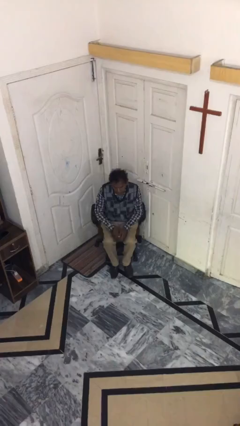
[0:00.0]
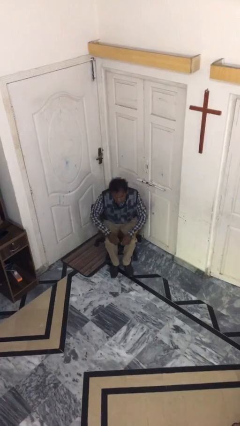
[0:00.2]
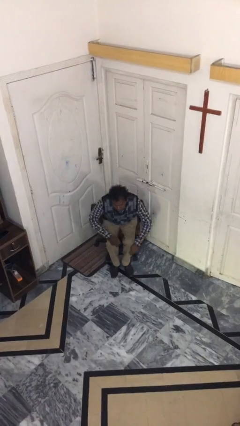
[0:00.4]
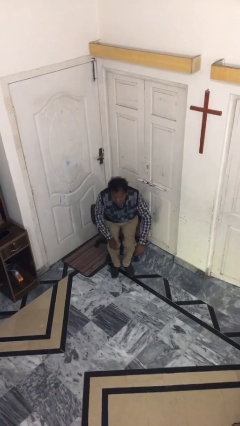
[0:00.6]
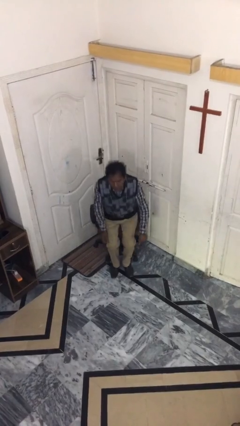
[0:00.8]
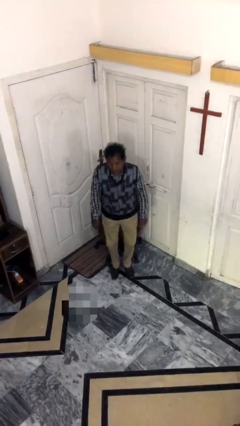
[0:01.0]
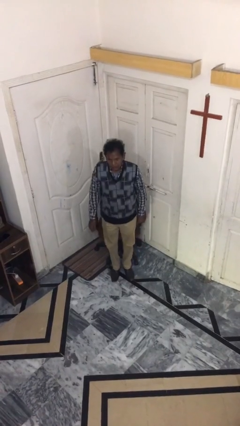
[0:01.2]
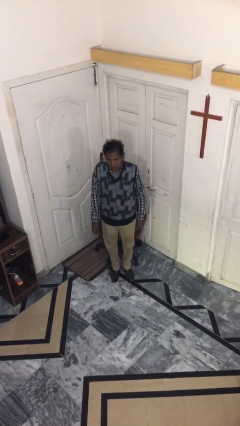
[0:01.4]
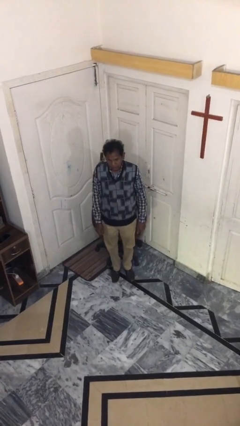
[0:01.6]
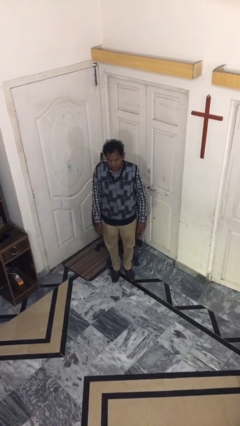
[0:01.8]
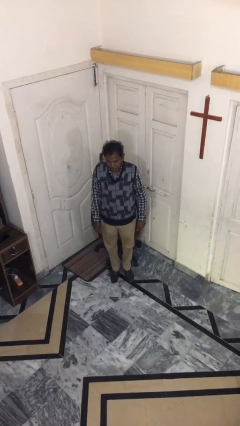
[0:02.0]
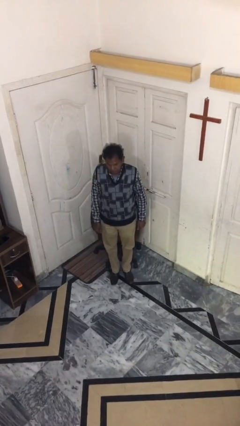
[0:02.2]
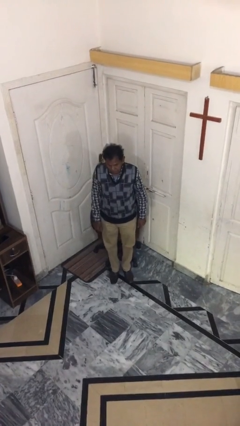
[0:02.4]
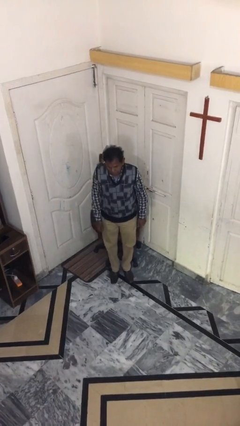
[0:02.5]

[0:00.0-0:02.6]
person stands up

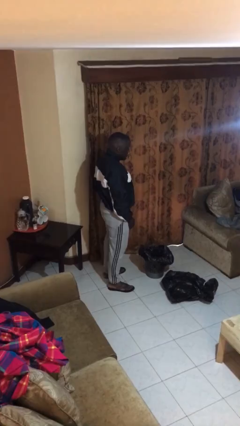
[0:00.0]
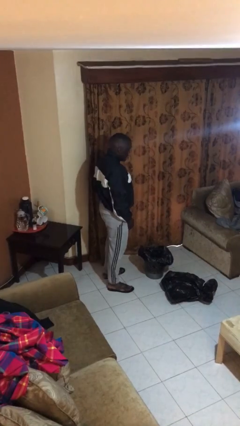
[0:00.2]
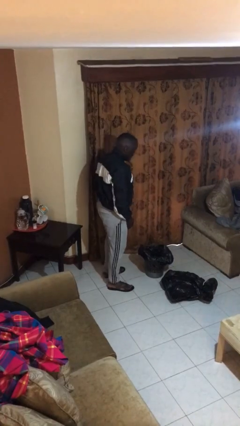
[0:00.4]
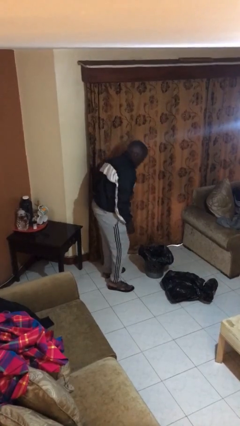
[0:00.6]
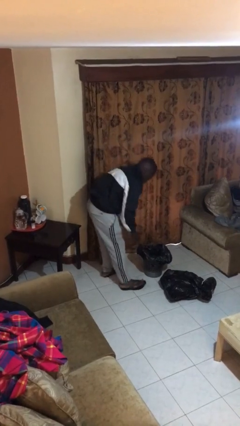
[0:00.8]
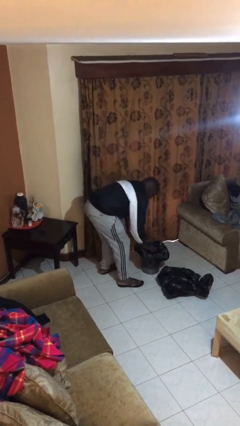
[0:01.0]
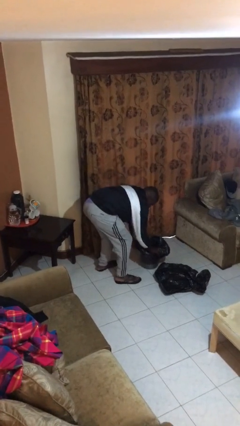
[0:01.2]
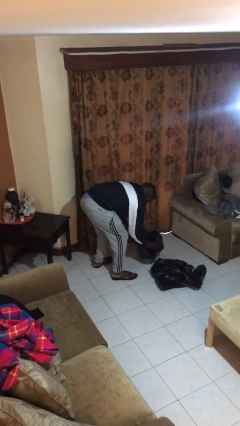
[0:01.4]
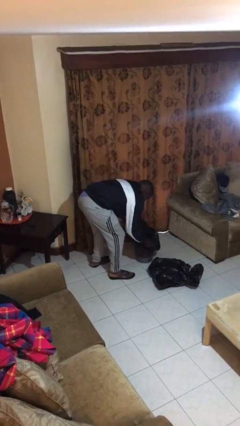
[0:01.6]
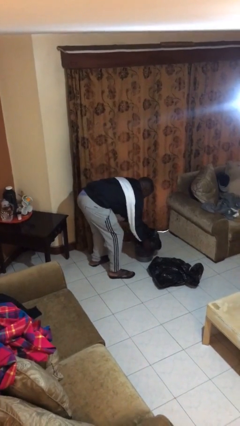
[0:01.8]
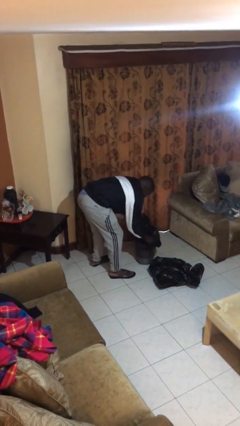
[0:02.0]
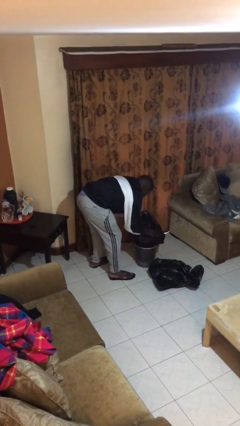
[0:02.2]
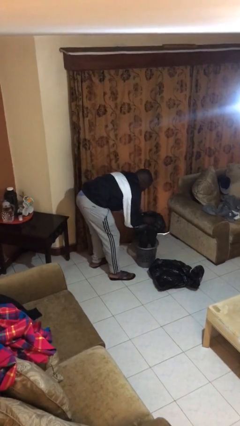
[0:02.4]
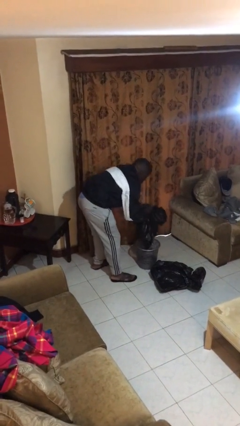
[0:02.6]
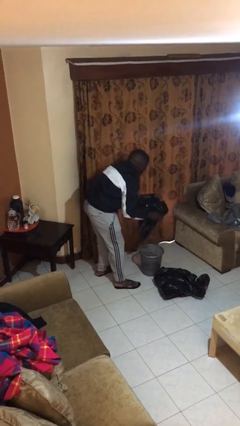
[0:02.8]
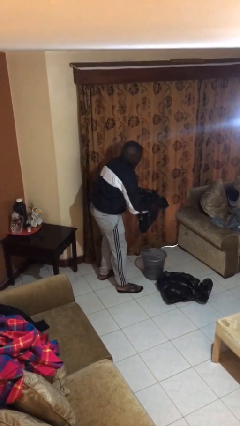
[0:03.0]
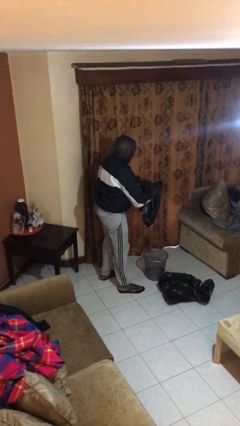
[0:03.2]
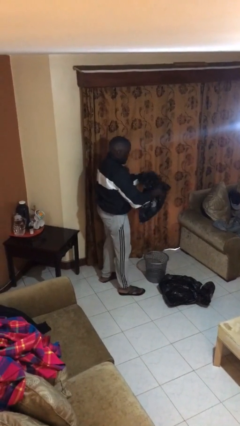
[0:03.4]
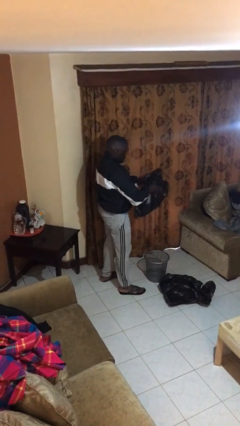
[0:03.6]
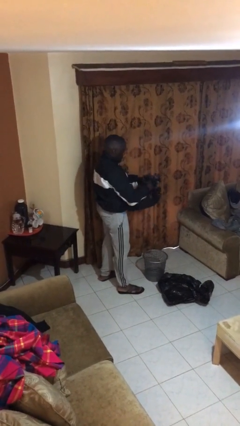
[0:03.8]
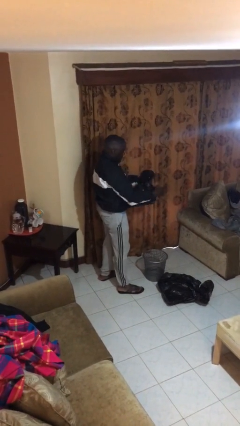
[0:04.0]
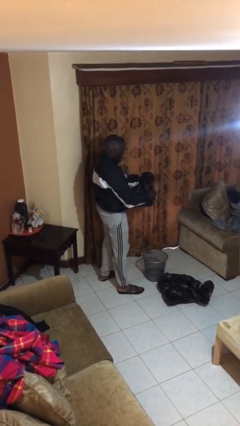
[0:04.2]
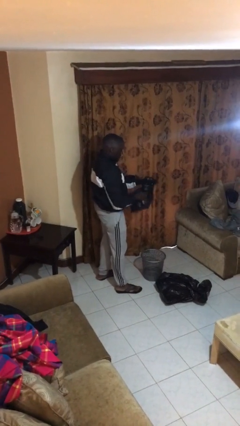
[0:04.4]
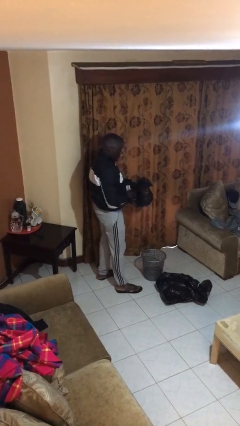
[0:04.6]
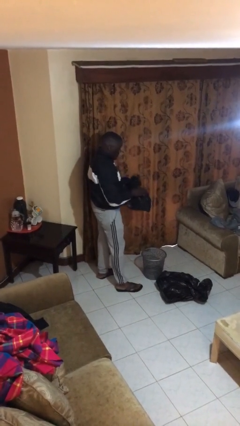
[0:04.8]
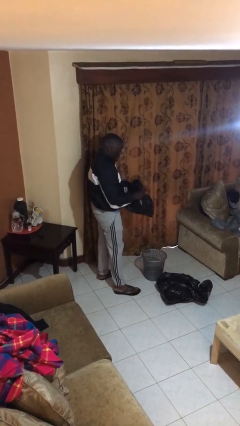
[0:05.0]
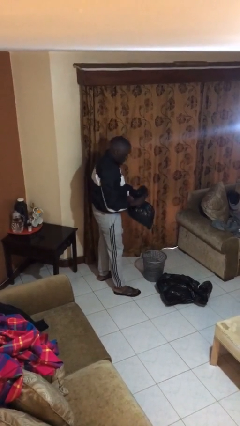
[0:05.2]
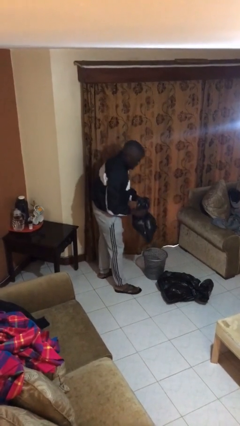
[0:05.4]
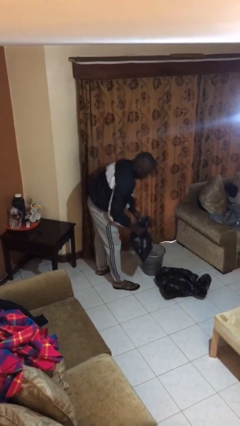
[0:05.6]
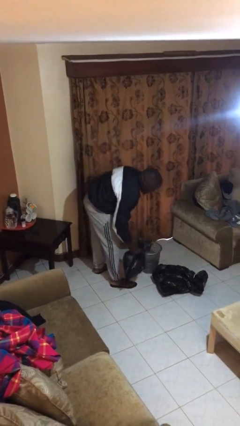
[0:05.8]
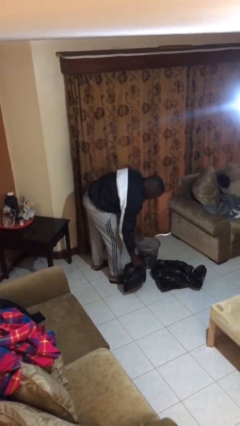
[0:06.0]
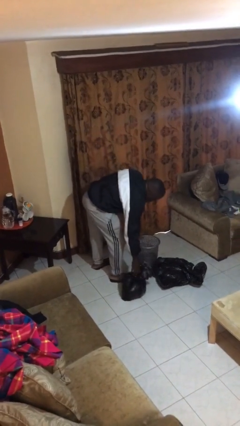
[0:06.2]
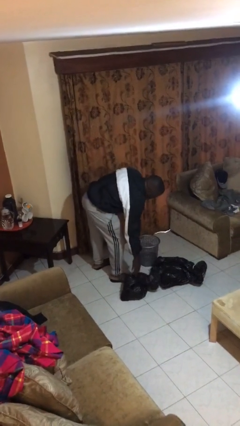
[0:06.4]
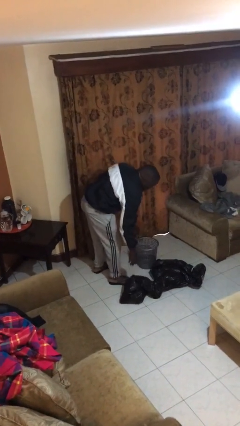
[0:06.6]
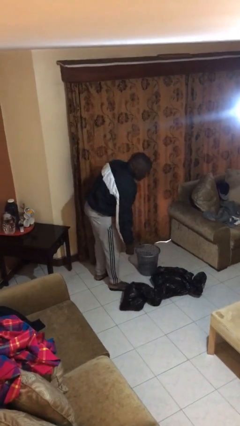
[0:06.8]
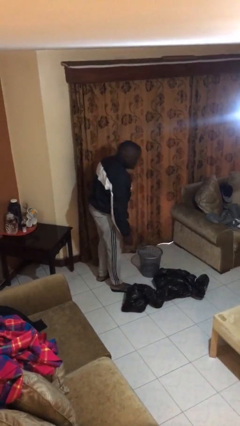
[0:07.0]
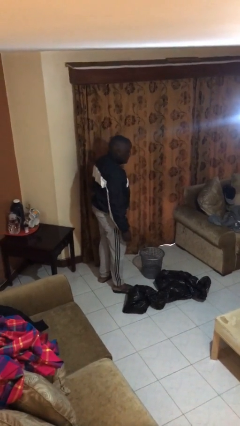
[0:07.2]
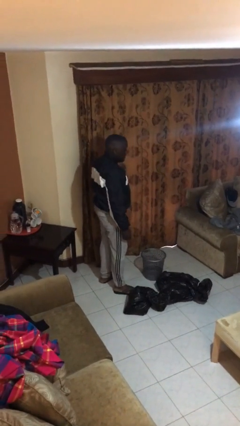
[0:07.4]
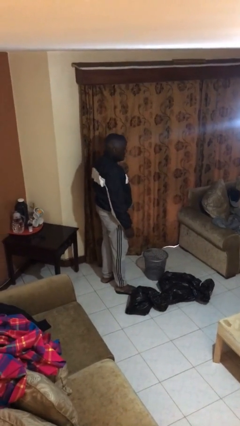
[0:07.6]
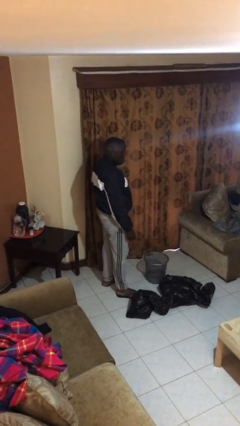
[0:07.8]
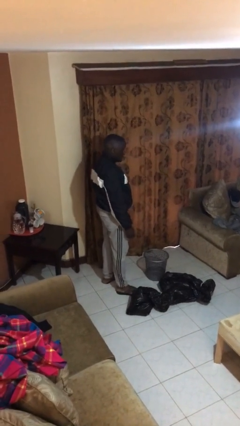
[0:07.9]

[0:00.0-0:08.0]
person removes trashbag from trashcan

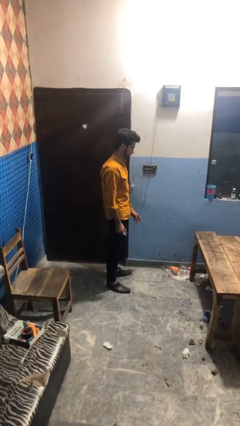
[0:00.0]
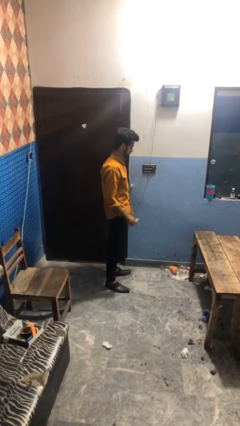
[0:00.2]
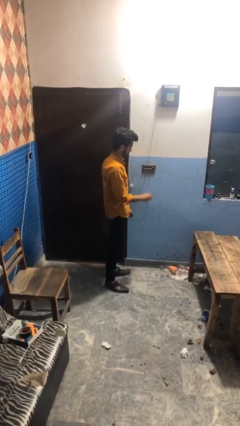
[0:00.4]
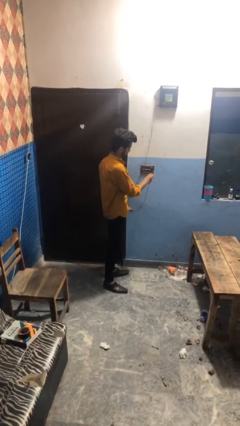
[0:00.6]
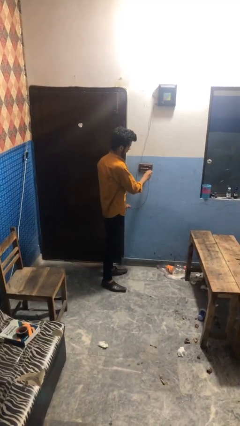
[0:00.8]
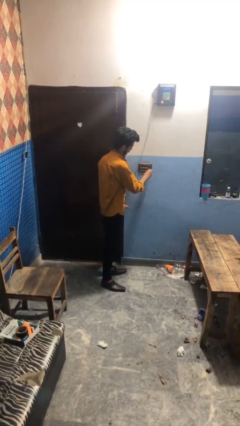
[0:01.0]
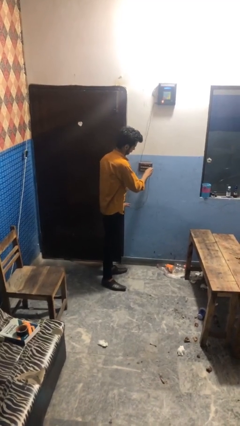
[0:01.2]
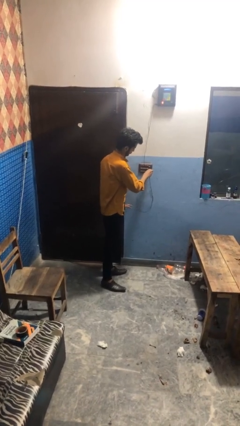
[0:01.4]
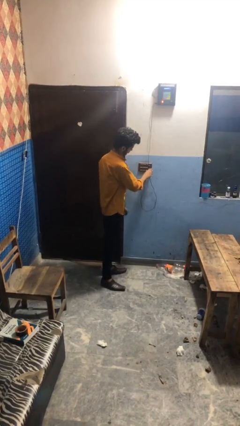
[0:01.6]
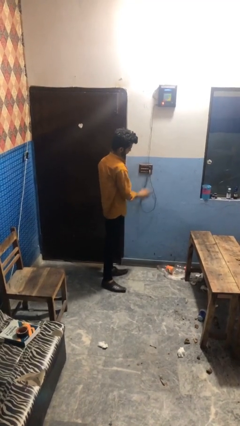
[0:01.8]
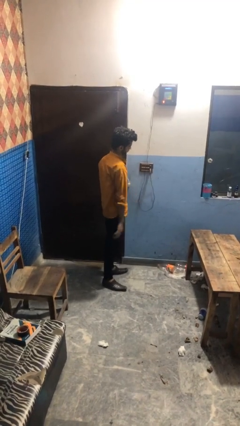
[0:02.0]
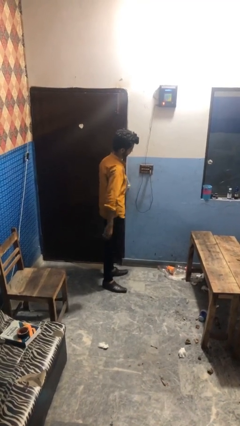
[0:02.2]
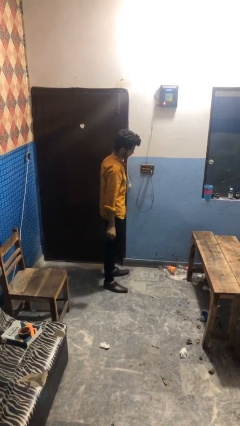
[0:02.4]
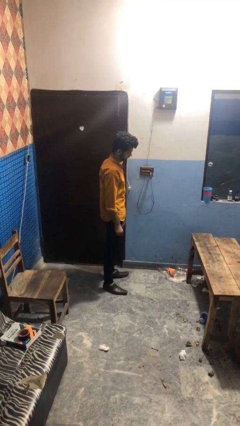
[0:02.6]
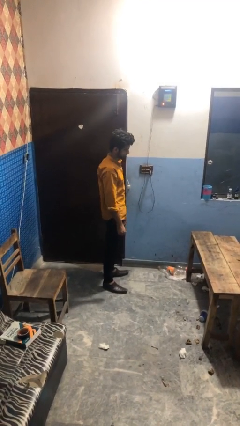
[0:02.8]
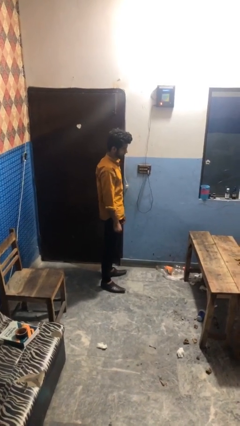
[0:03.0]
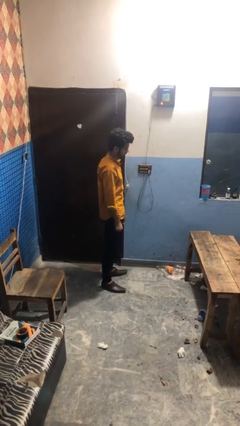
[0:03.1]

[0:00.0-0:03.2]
person plugs into electrical socket

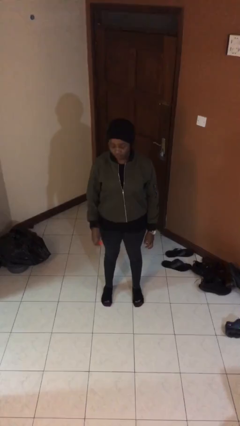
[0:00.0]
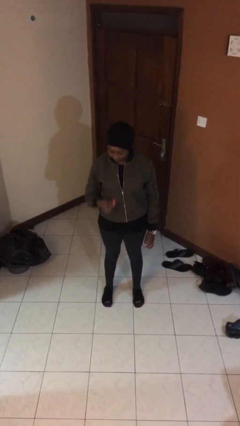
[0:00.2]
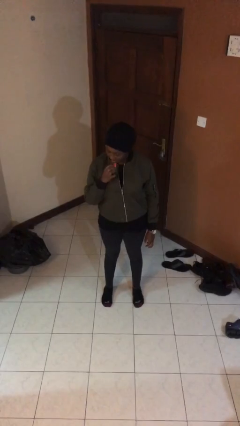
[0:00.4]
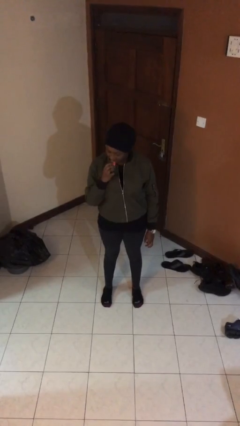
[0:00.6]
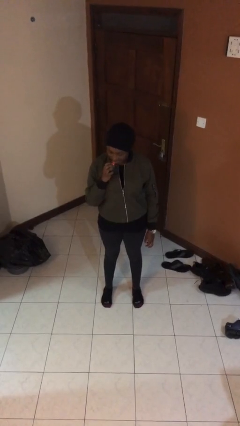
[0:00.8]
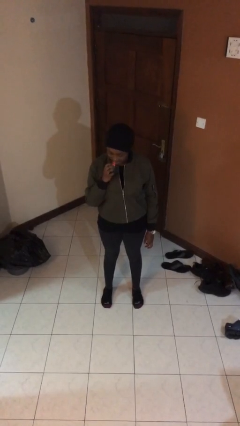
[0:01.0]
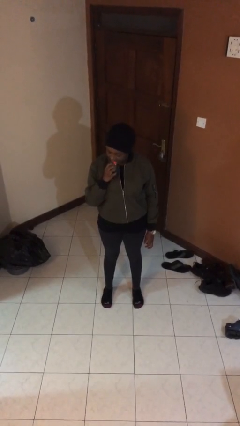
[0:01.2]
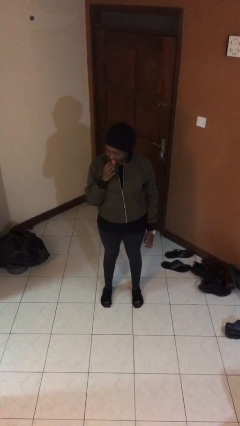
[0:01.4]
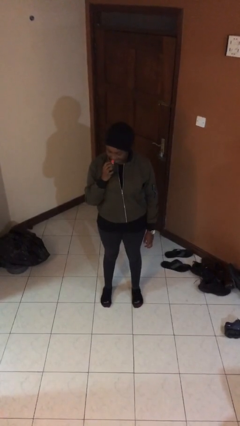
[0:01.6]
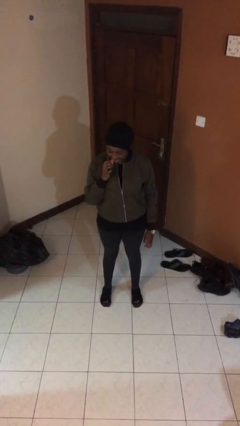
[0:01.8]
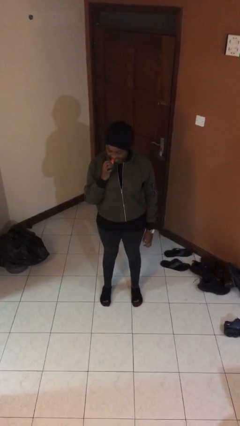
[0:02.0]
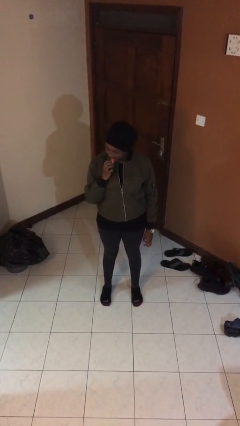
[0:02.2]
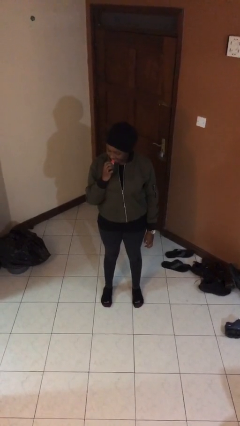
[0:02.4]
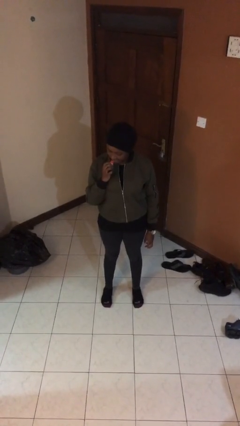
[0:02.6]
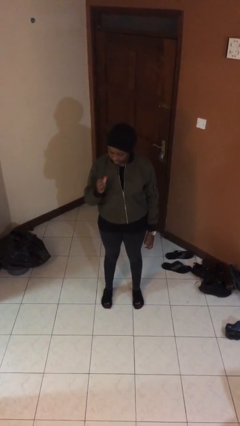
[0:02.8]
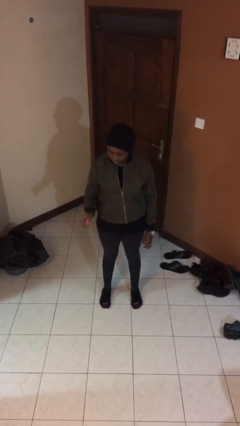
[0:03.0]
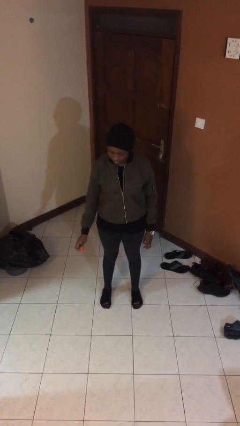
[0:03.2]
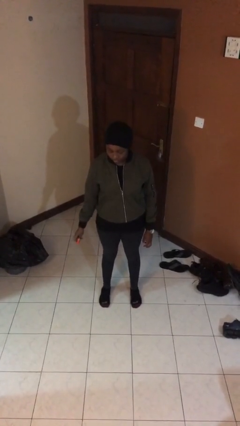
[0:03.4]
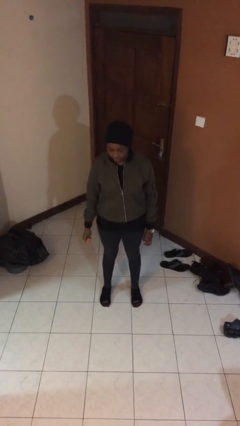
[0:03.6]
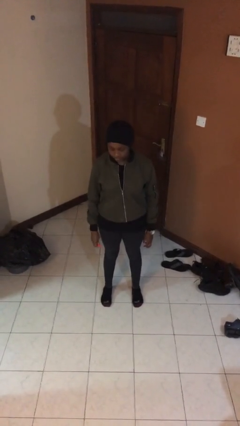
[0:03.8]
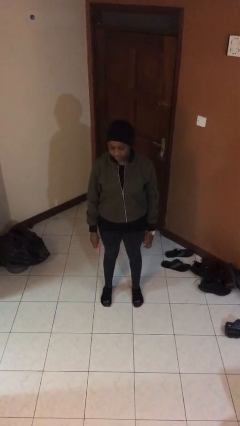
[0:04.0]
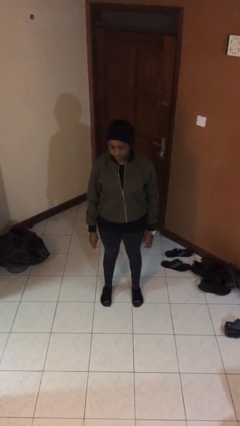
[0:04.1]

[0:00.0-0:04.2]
person applies lip makeup
